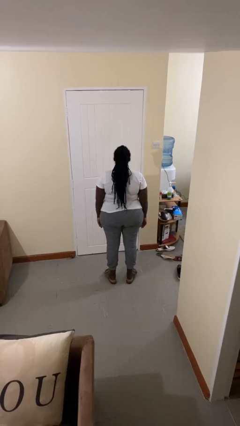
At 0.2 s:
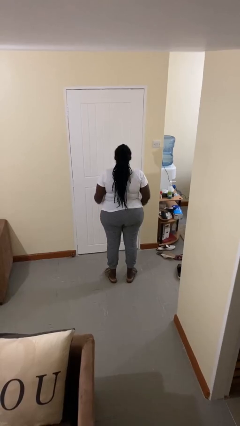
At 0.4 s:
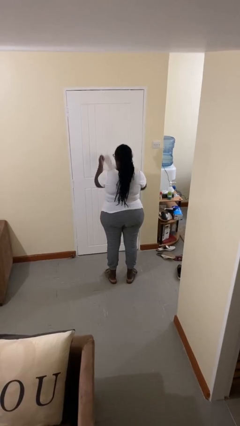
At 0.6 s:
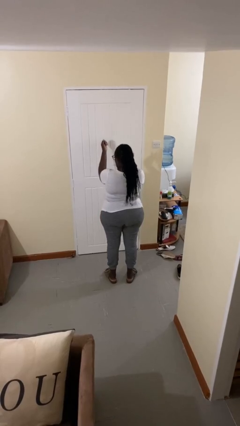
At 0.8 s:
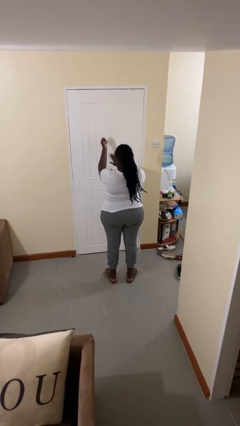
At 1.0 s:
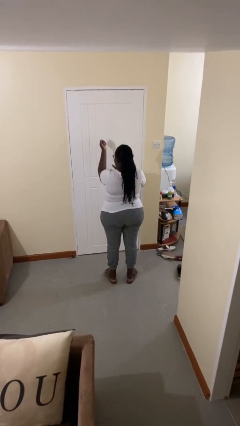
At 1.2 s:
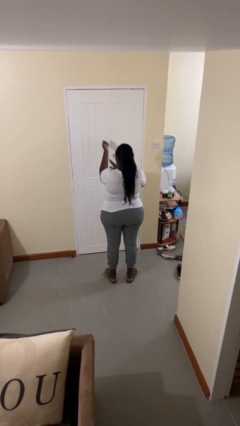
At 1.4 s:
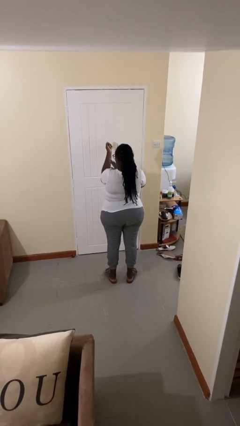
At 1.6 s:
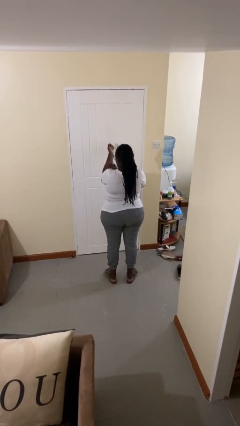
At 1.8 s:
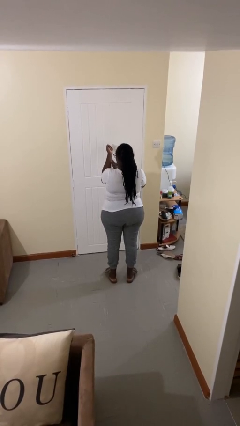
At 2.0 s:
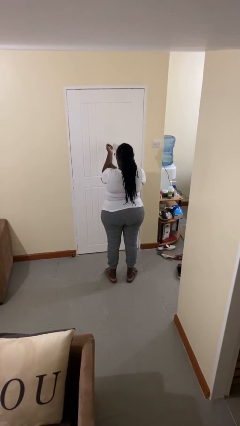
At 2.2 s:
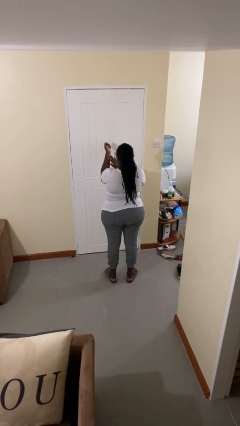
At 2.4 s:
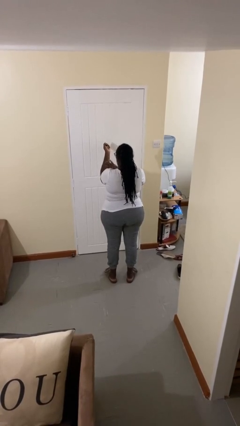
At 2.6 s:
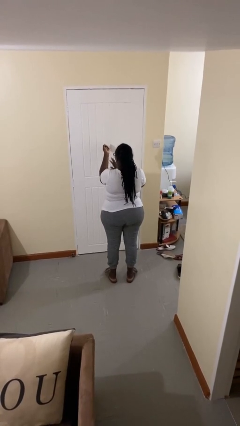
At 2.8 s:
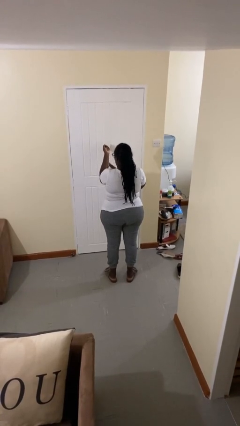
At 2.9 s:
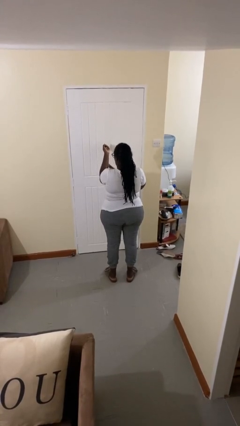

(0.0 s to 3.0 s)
person swats bug

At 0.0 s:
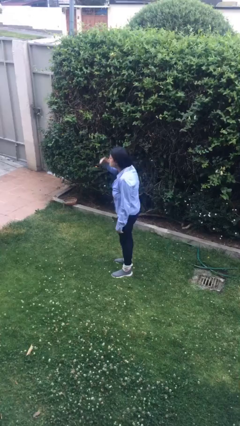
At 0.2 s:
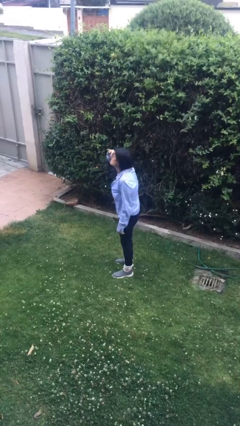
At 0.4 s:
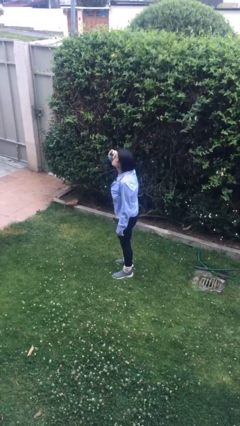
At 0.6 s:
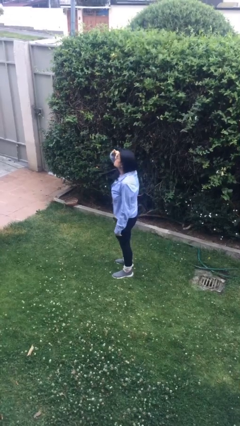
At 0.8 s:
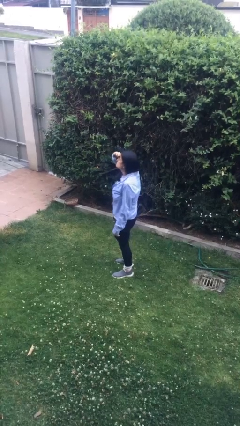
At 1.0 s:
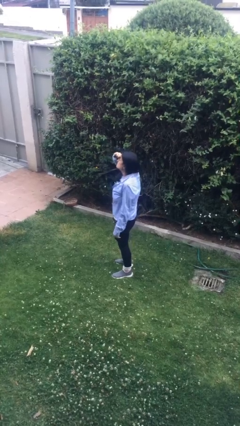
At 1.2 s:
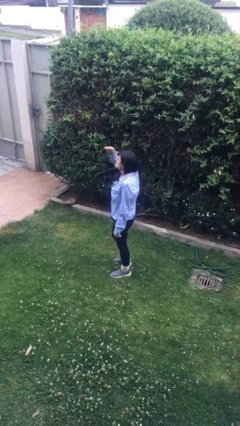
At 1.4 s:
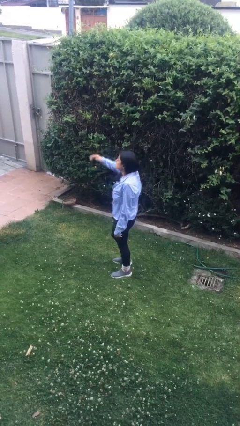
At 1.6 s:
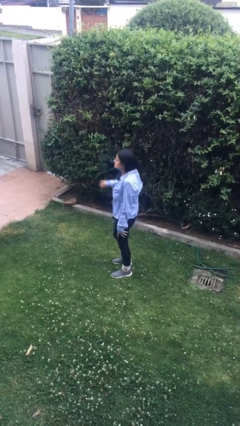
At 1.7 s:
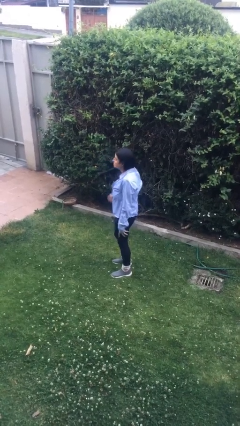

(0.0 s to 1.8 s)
person shades eyes

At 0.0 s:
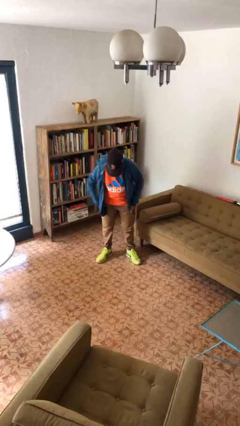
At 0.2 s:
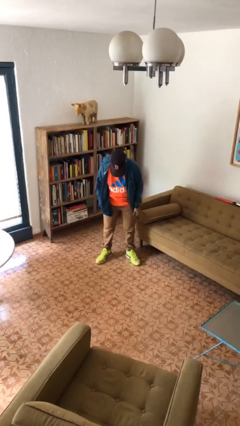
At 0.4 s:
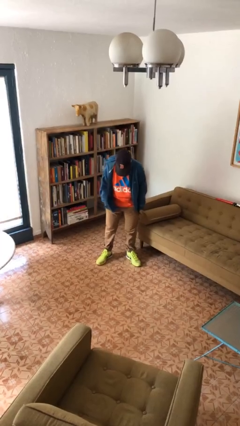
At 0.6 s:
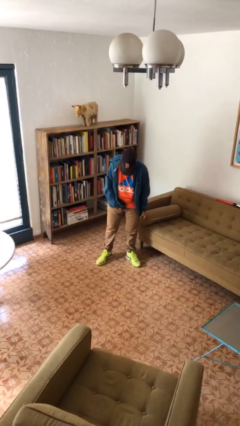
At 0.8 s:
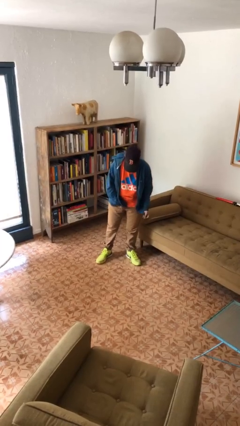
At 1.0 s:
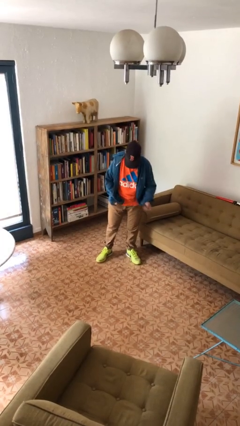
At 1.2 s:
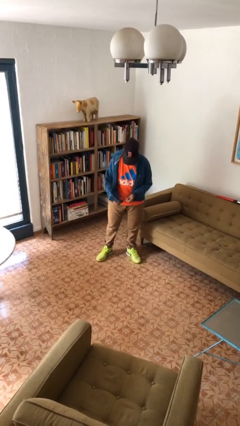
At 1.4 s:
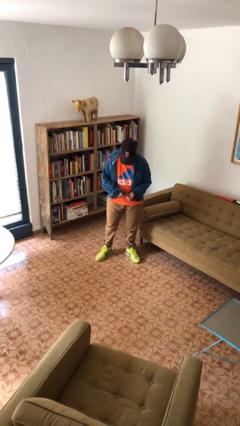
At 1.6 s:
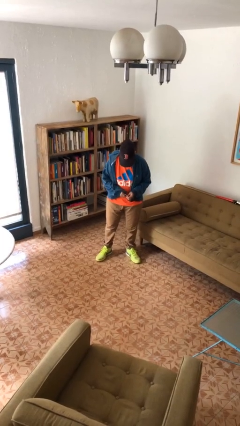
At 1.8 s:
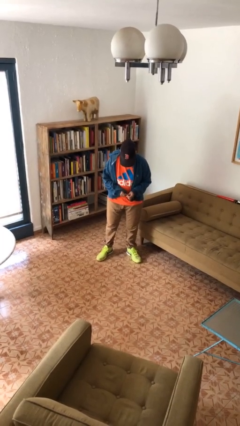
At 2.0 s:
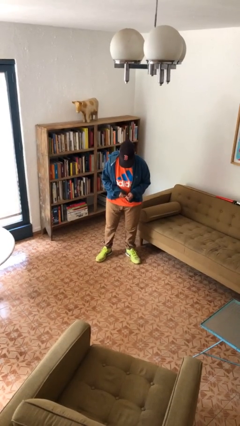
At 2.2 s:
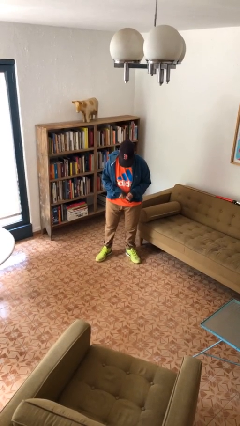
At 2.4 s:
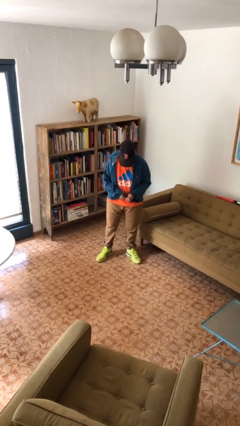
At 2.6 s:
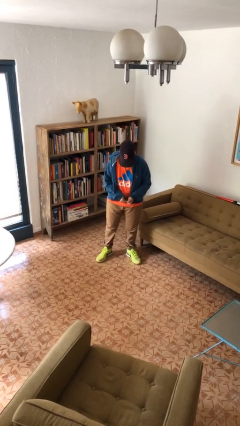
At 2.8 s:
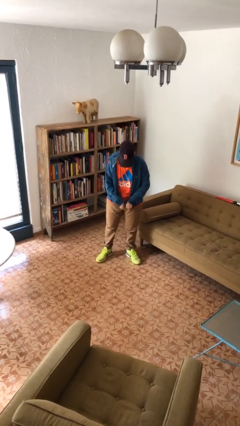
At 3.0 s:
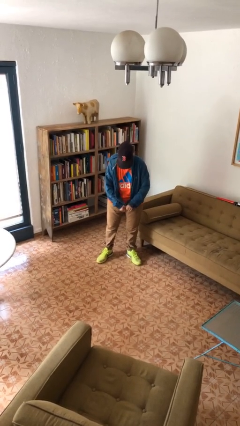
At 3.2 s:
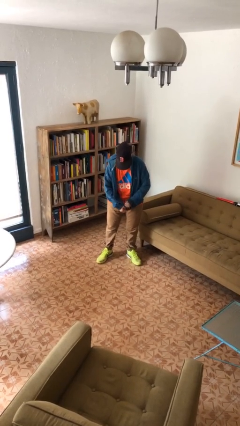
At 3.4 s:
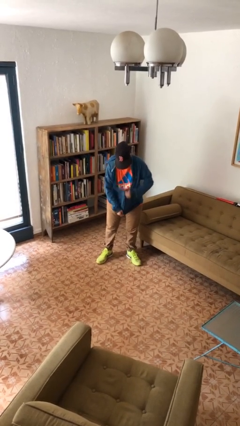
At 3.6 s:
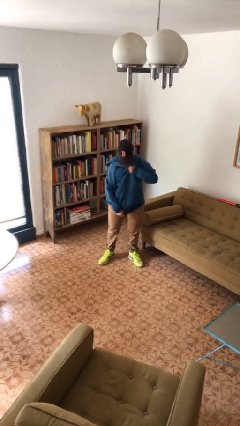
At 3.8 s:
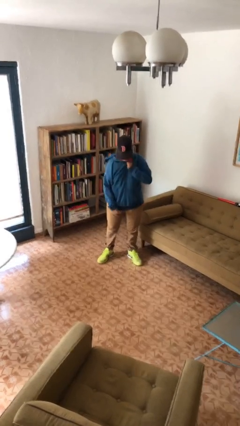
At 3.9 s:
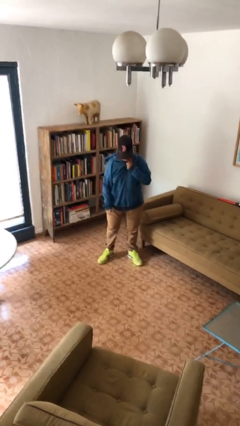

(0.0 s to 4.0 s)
person zips up jacket

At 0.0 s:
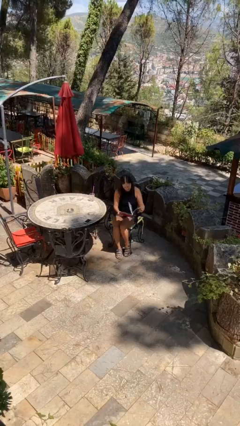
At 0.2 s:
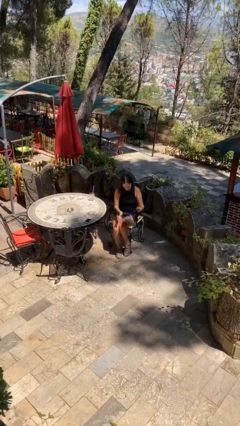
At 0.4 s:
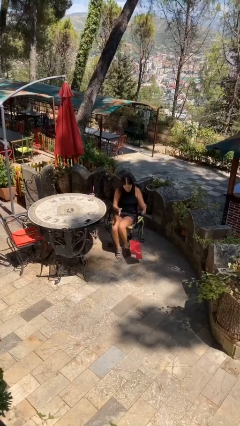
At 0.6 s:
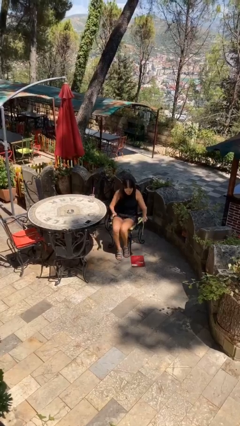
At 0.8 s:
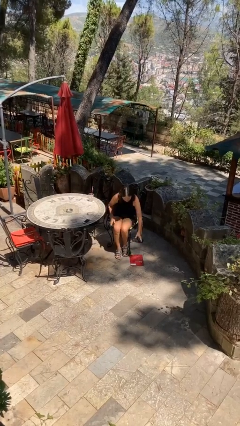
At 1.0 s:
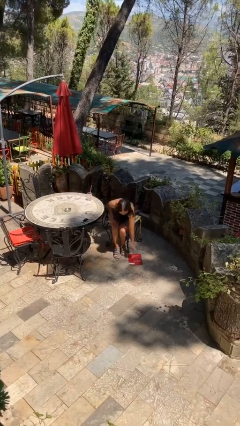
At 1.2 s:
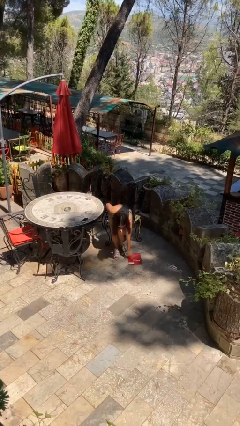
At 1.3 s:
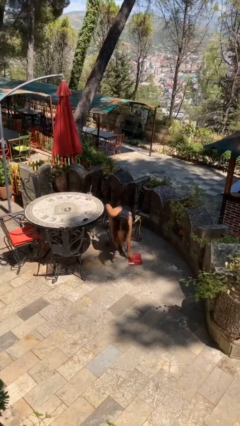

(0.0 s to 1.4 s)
person drops object

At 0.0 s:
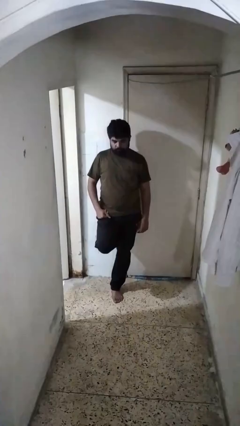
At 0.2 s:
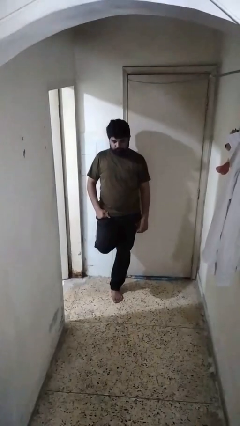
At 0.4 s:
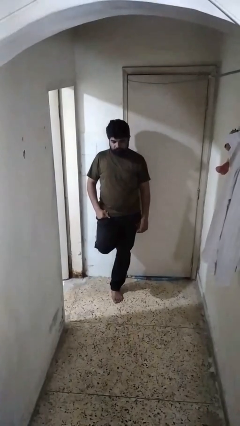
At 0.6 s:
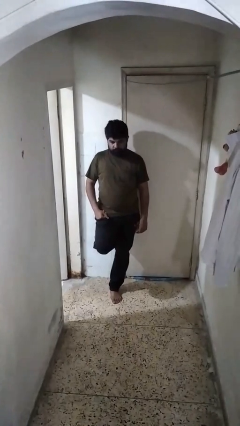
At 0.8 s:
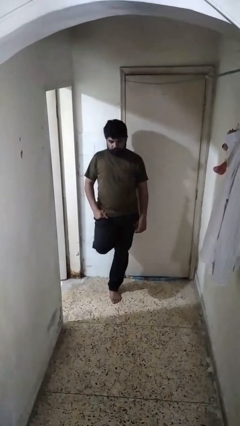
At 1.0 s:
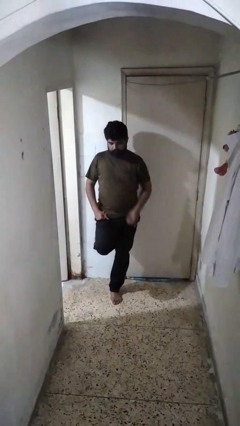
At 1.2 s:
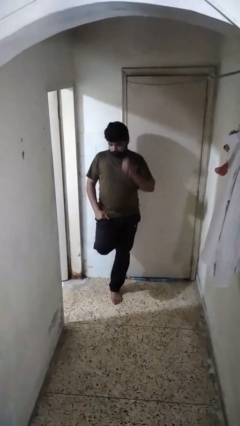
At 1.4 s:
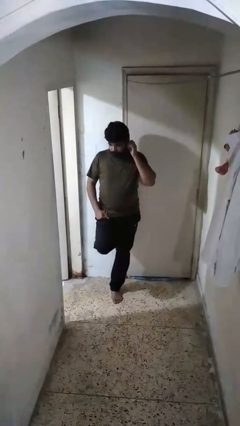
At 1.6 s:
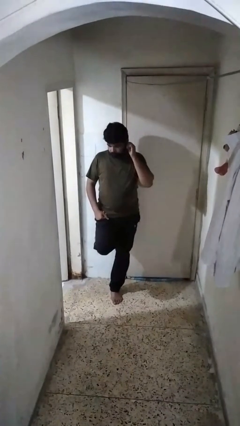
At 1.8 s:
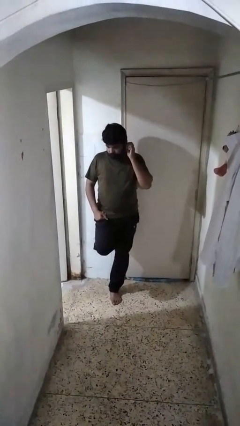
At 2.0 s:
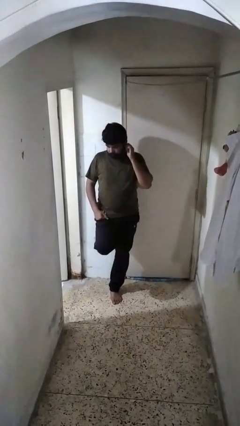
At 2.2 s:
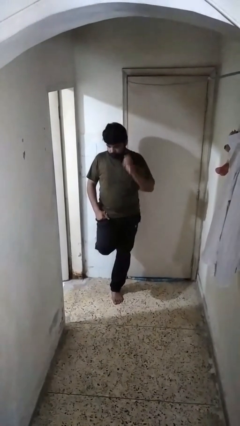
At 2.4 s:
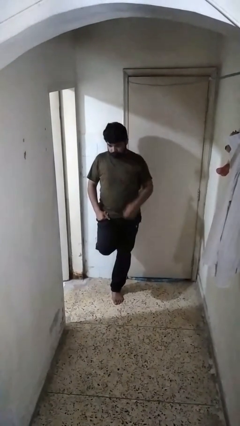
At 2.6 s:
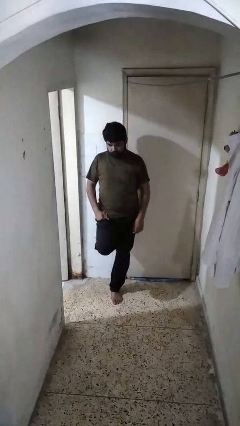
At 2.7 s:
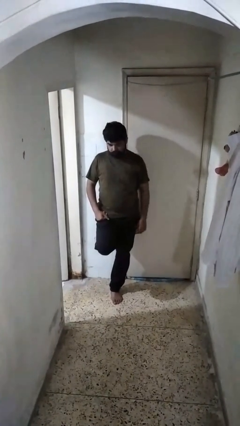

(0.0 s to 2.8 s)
person touches earlobe

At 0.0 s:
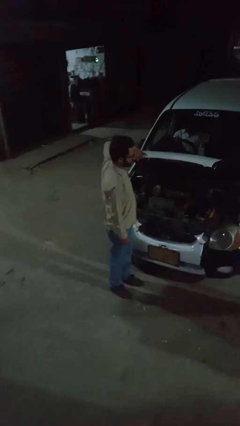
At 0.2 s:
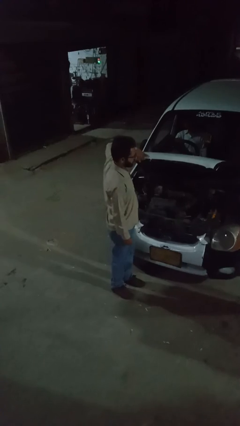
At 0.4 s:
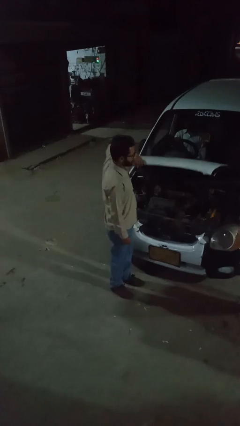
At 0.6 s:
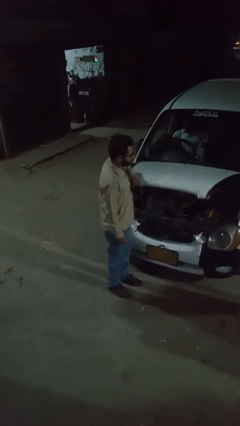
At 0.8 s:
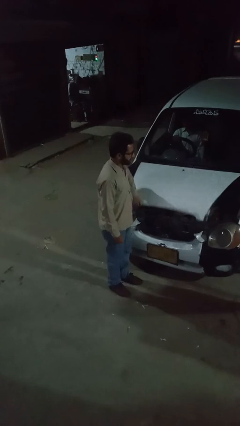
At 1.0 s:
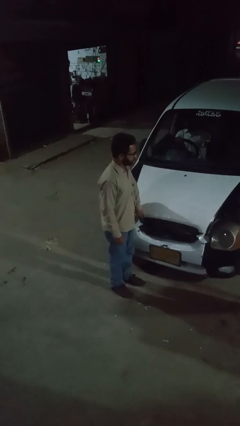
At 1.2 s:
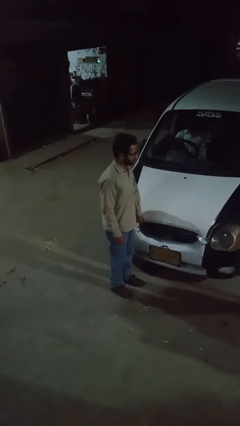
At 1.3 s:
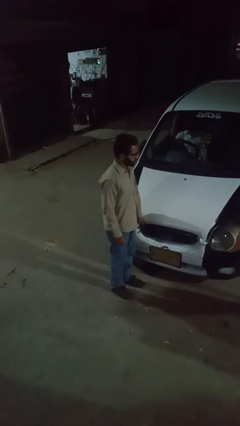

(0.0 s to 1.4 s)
person closes car hood

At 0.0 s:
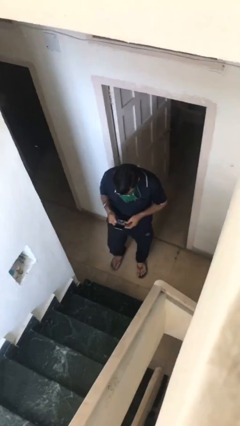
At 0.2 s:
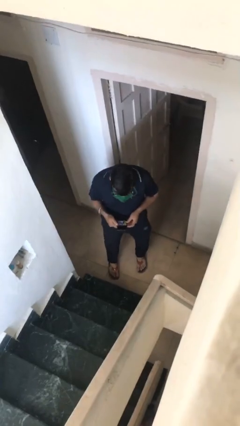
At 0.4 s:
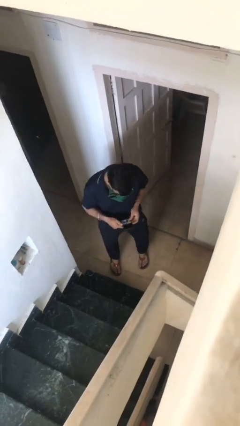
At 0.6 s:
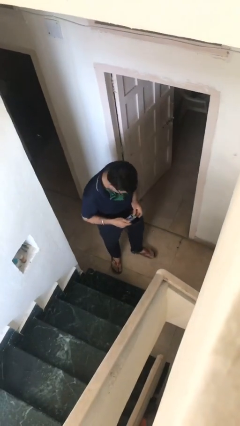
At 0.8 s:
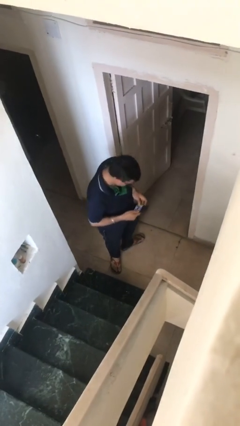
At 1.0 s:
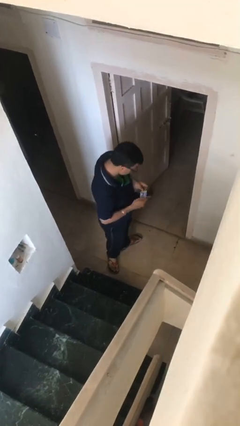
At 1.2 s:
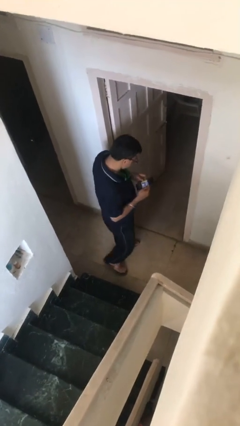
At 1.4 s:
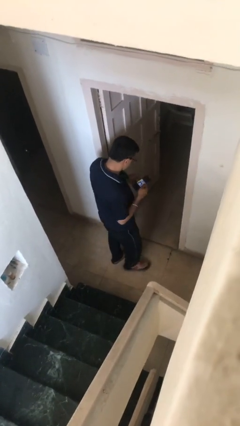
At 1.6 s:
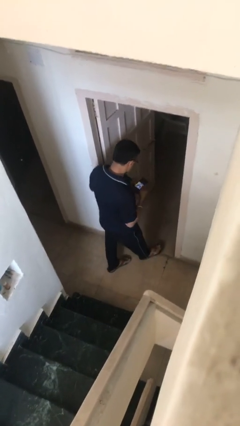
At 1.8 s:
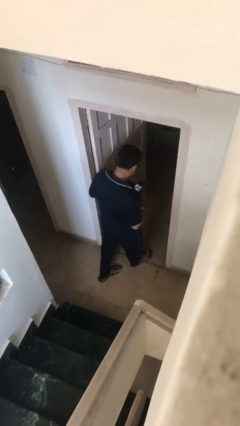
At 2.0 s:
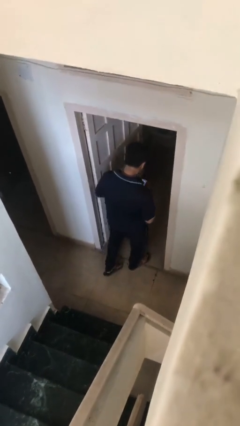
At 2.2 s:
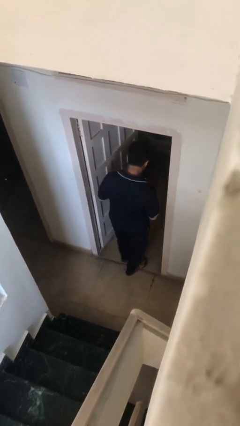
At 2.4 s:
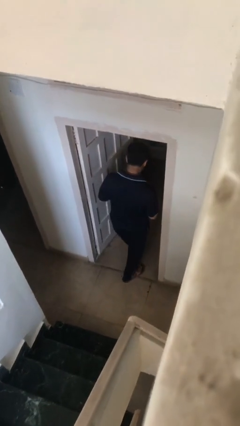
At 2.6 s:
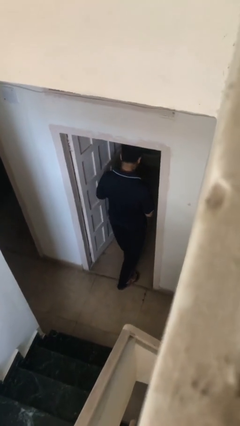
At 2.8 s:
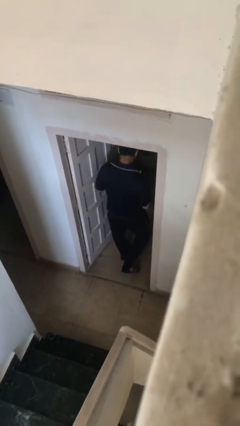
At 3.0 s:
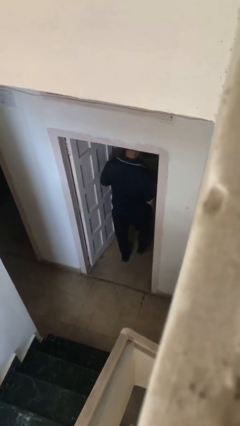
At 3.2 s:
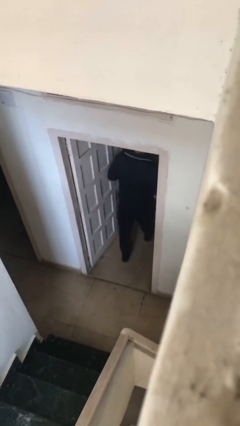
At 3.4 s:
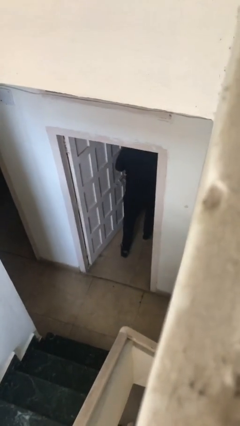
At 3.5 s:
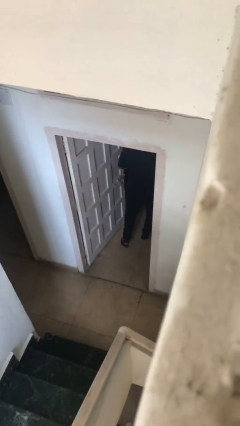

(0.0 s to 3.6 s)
person exits scene through structure
